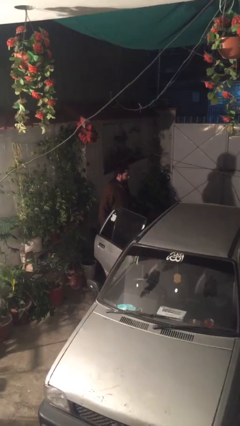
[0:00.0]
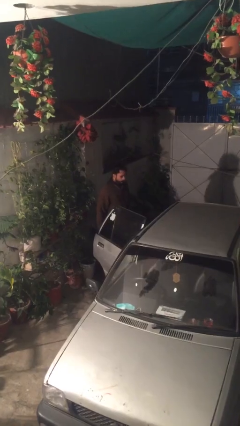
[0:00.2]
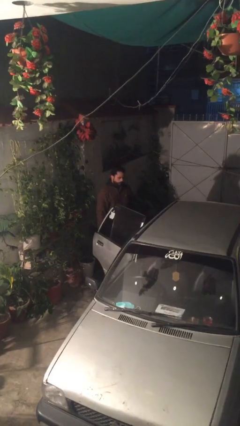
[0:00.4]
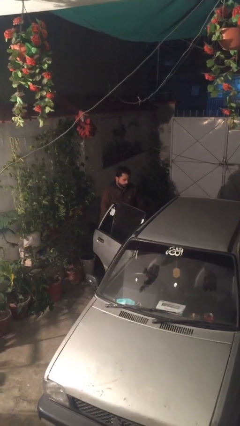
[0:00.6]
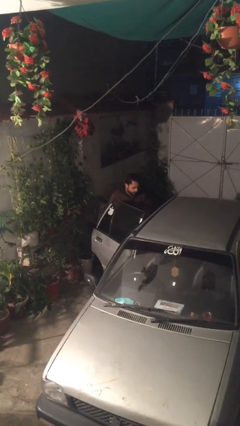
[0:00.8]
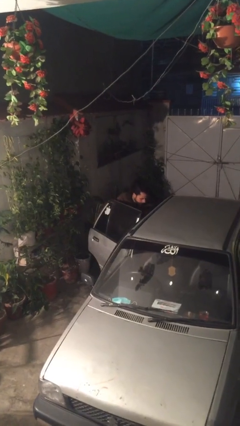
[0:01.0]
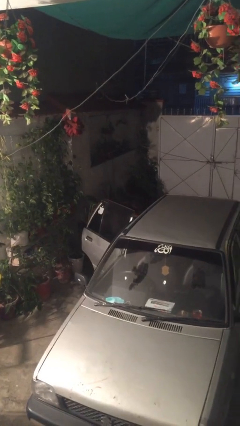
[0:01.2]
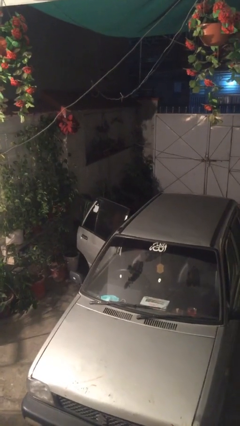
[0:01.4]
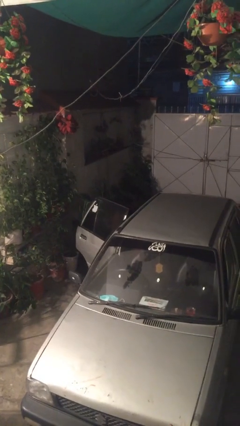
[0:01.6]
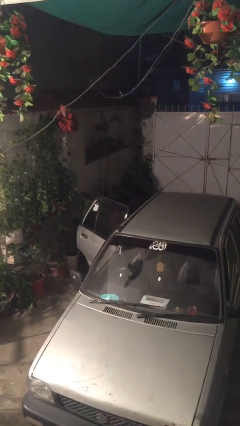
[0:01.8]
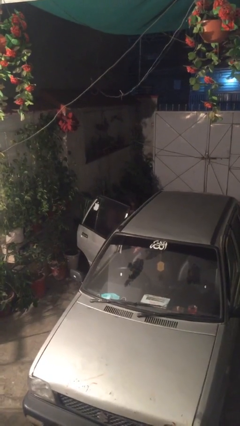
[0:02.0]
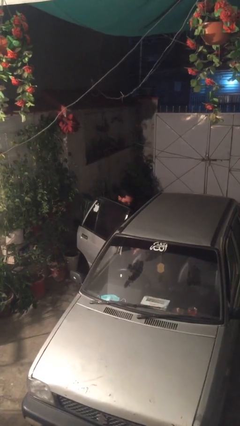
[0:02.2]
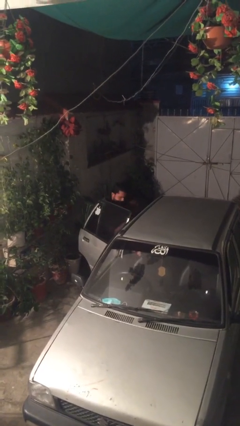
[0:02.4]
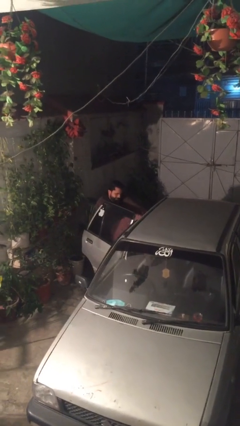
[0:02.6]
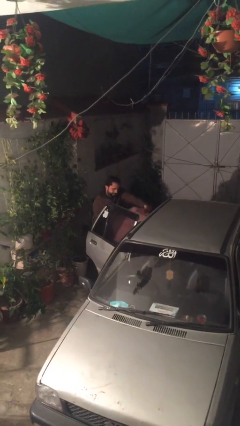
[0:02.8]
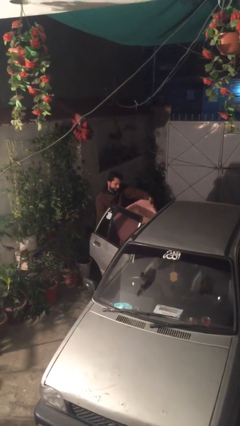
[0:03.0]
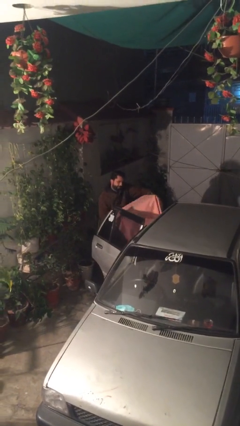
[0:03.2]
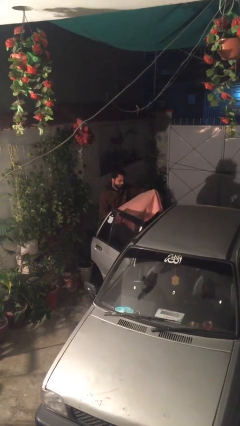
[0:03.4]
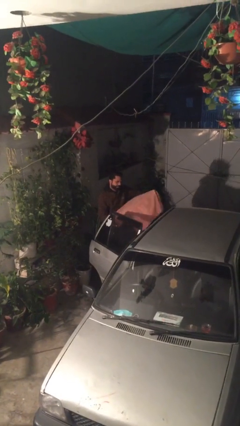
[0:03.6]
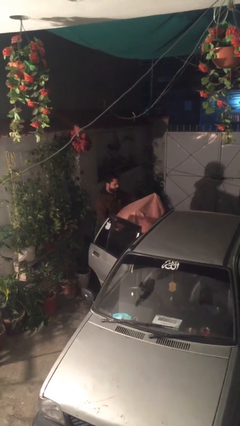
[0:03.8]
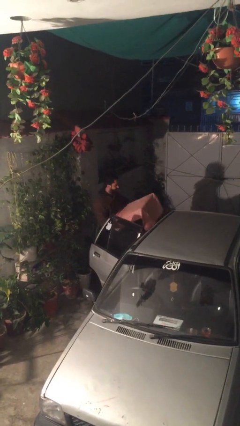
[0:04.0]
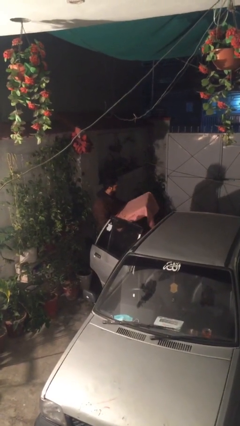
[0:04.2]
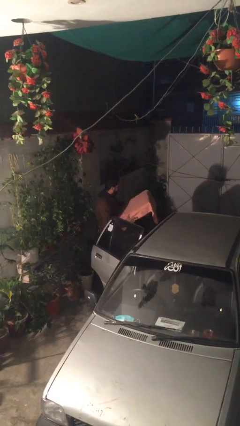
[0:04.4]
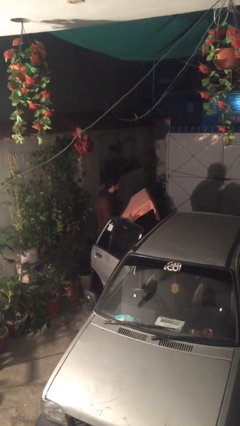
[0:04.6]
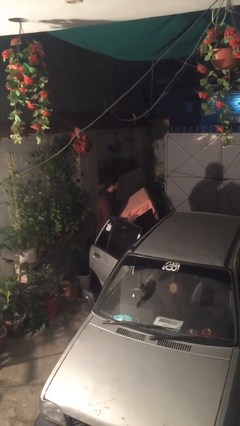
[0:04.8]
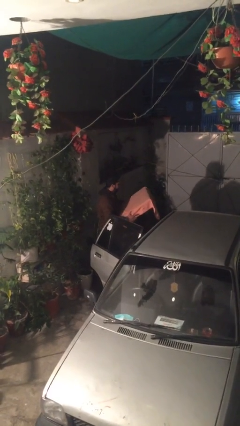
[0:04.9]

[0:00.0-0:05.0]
person unloads car

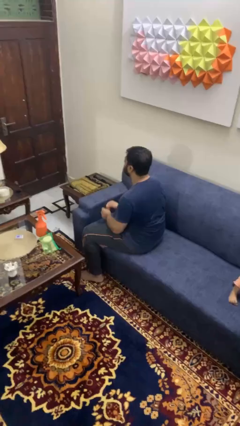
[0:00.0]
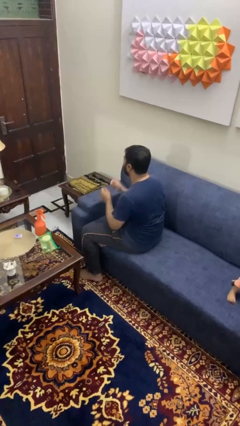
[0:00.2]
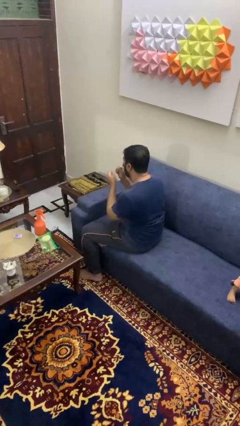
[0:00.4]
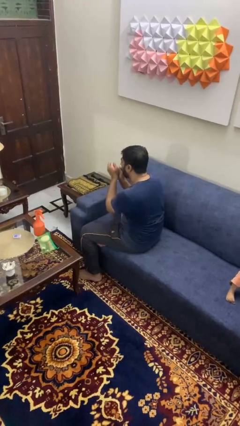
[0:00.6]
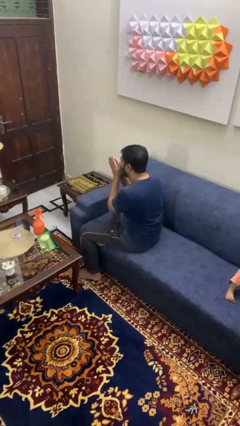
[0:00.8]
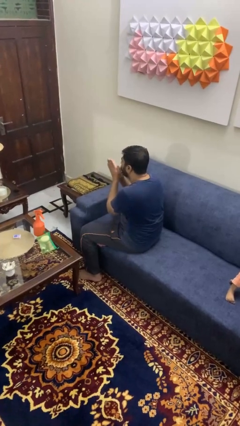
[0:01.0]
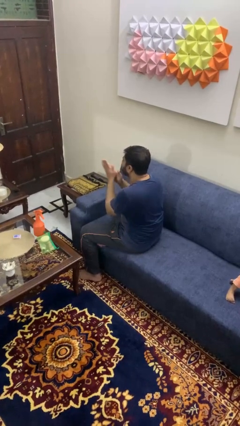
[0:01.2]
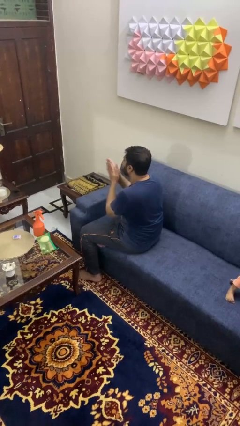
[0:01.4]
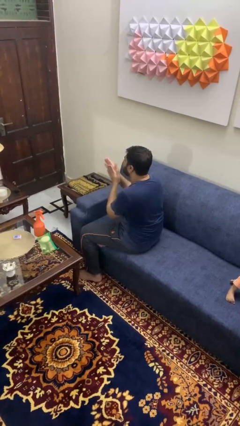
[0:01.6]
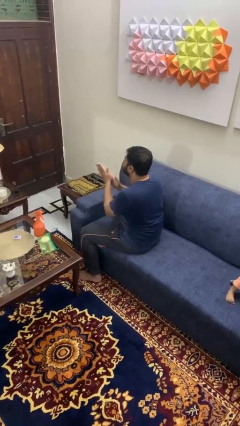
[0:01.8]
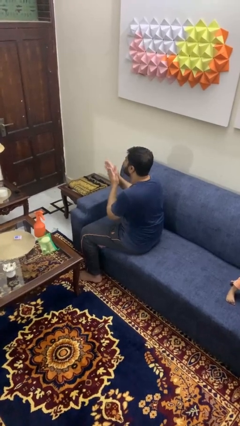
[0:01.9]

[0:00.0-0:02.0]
person blows into hands

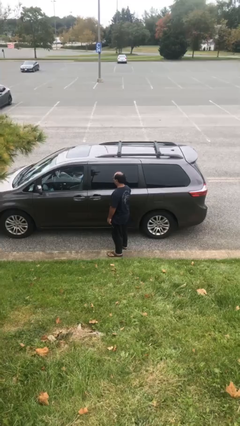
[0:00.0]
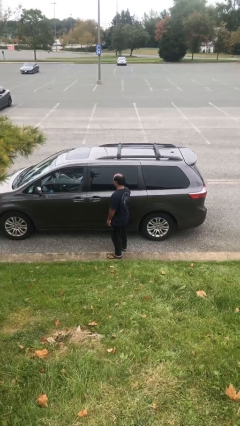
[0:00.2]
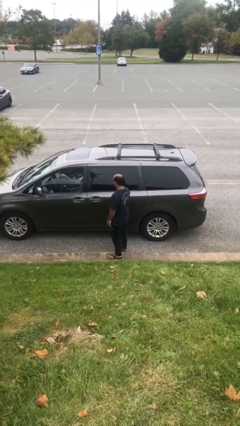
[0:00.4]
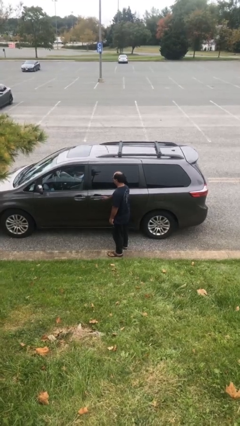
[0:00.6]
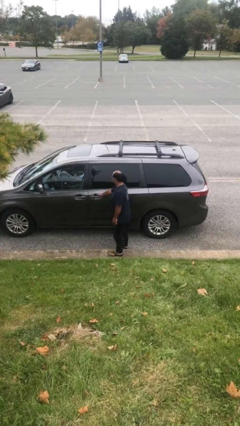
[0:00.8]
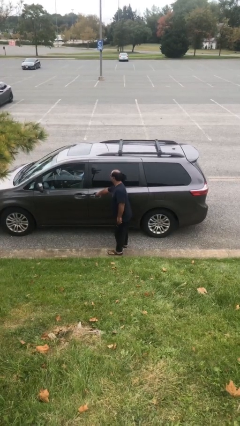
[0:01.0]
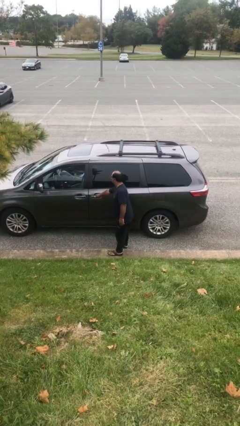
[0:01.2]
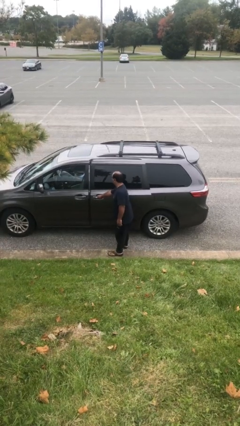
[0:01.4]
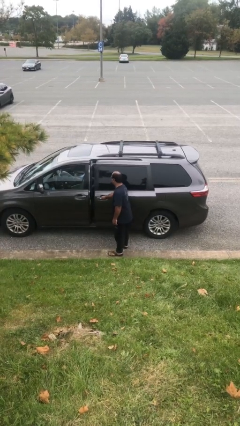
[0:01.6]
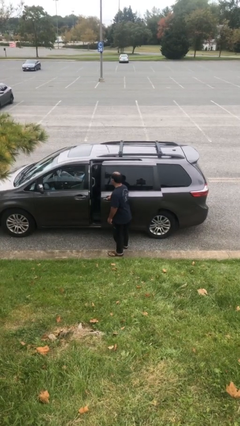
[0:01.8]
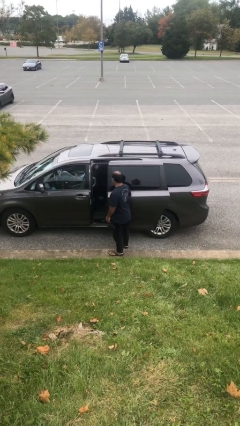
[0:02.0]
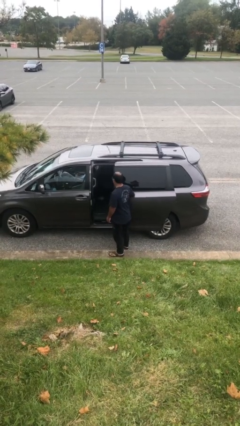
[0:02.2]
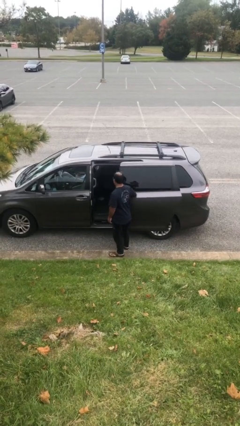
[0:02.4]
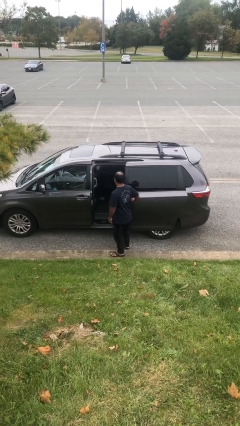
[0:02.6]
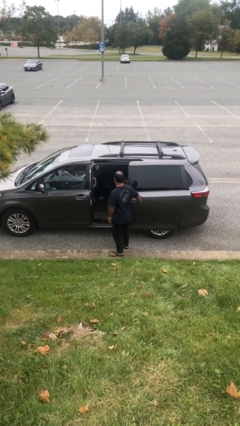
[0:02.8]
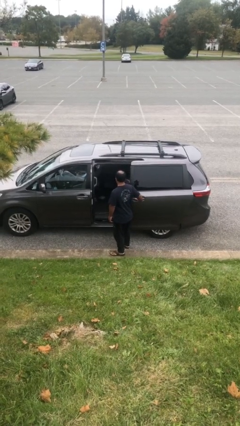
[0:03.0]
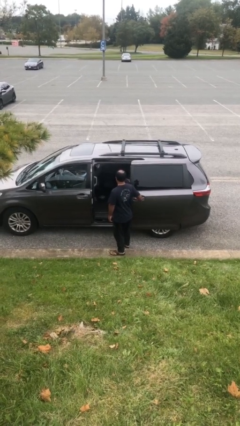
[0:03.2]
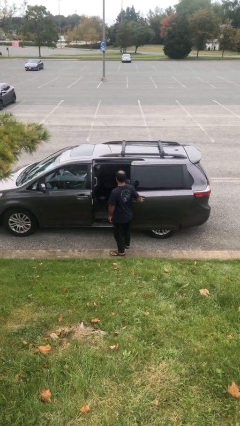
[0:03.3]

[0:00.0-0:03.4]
person opens car door

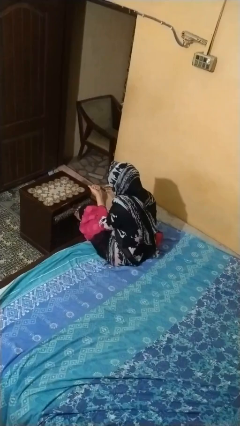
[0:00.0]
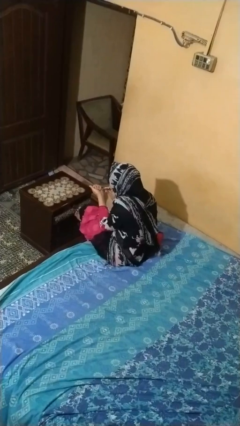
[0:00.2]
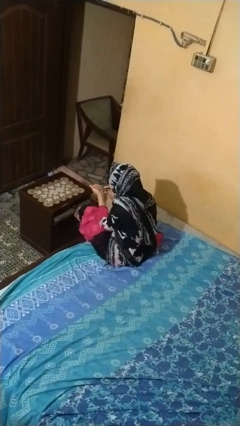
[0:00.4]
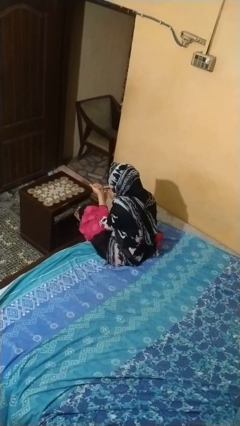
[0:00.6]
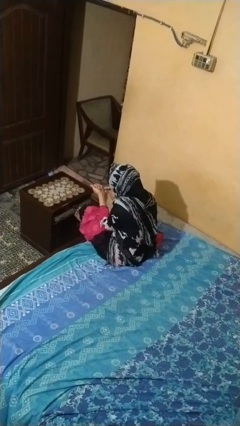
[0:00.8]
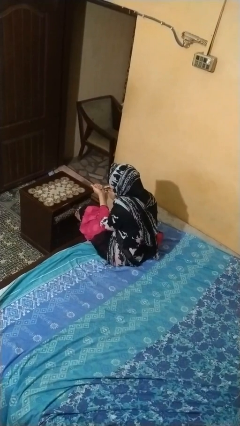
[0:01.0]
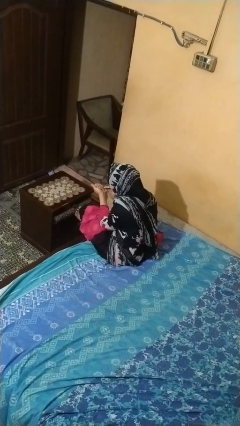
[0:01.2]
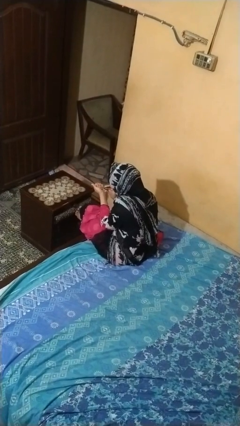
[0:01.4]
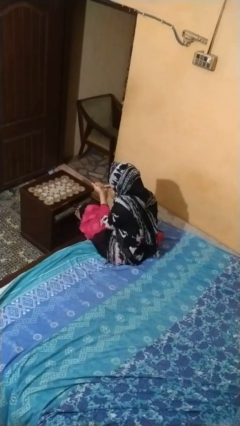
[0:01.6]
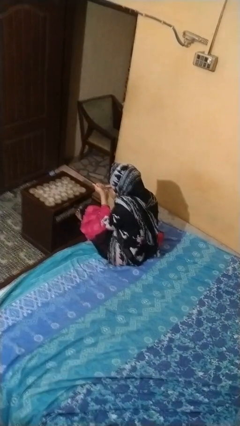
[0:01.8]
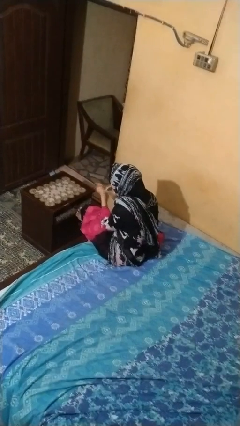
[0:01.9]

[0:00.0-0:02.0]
person clips fingernails

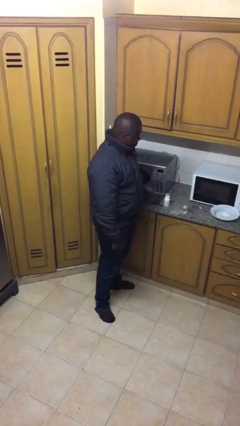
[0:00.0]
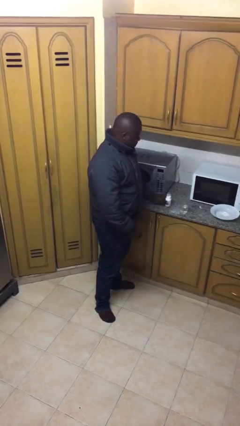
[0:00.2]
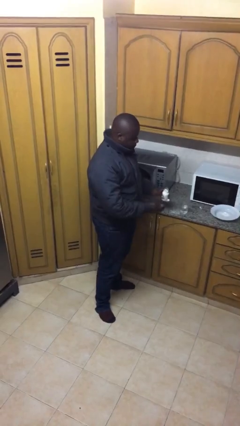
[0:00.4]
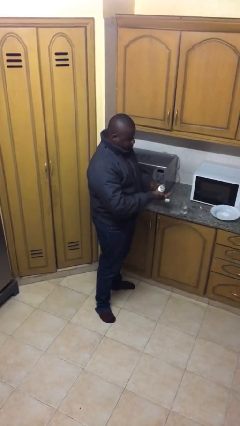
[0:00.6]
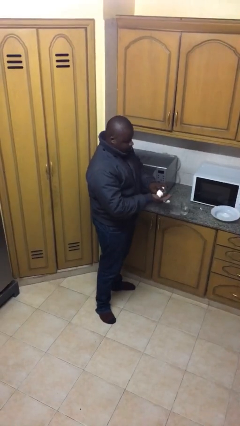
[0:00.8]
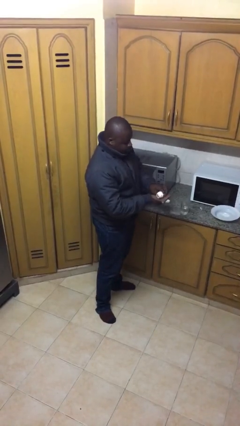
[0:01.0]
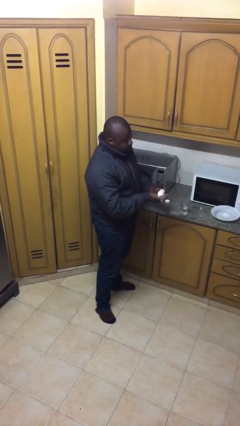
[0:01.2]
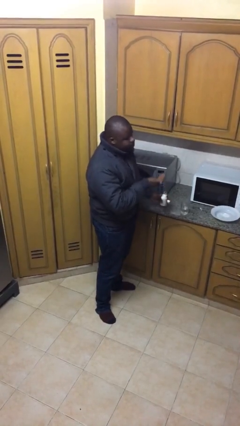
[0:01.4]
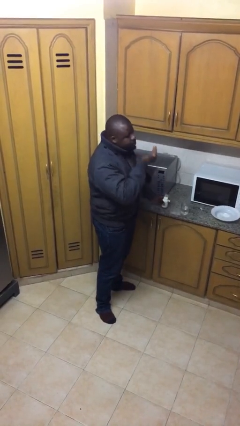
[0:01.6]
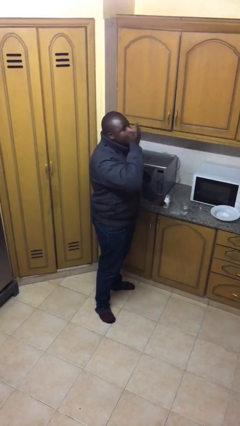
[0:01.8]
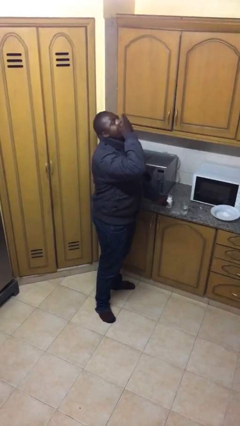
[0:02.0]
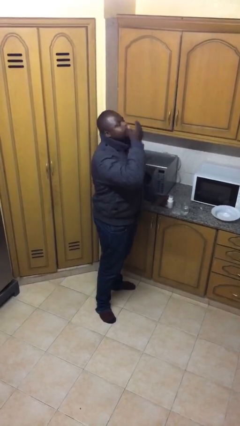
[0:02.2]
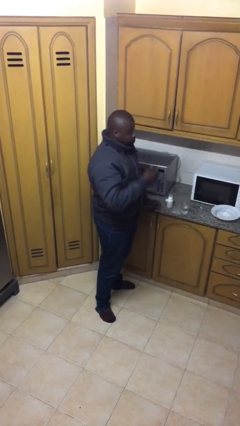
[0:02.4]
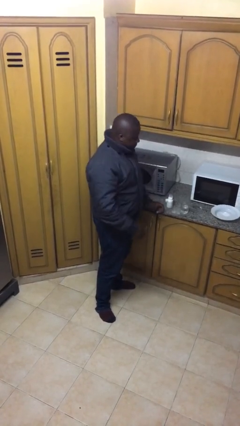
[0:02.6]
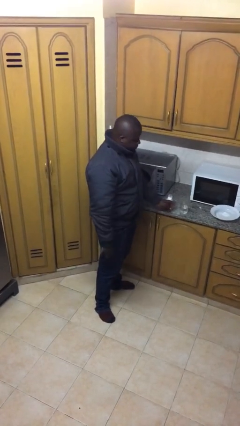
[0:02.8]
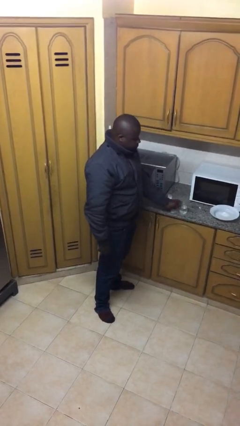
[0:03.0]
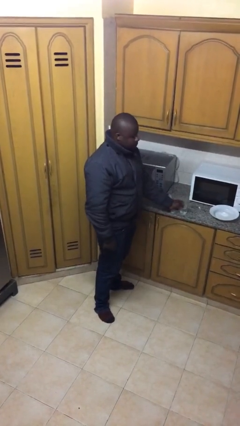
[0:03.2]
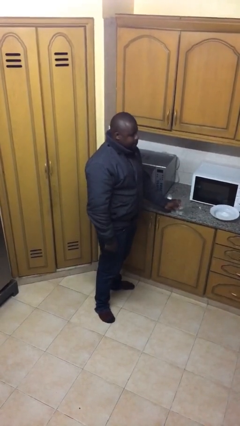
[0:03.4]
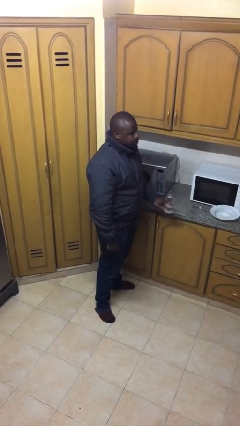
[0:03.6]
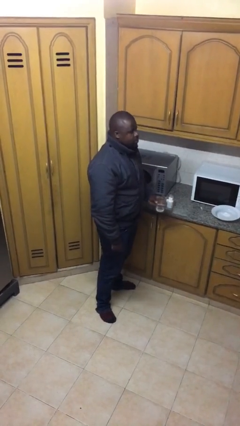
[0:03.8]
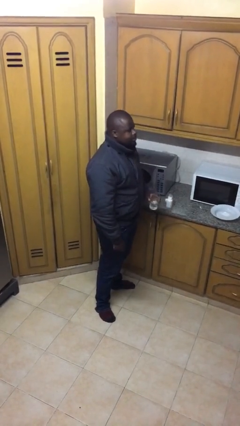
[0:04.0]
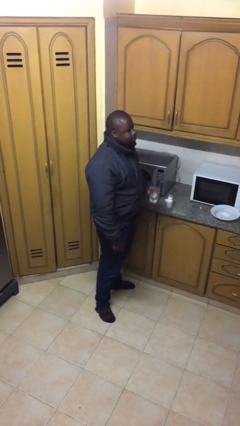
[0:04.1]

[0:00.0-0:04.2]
person takes medicine pills

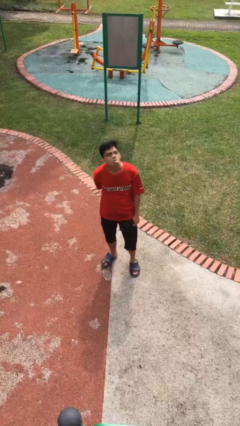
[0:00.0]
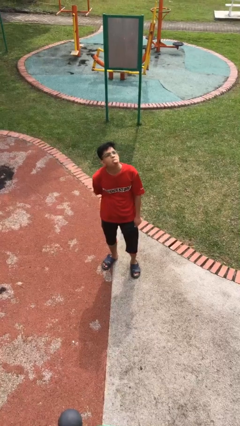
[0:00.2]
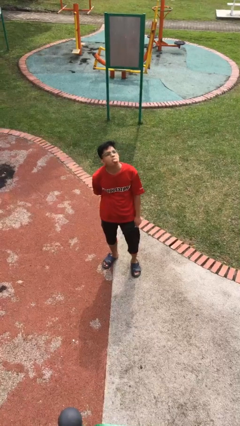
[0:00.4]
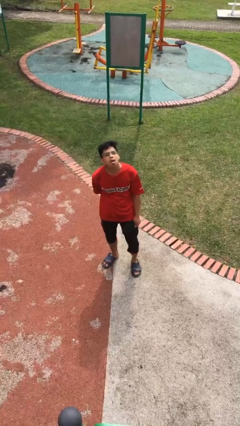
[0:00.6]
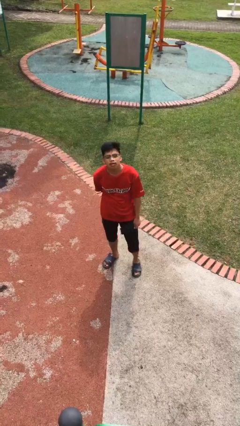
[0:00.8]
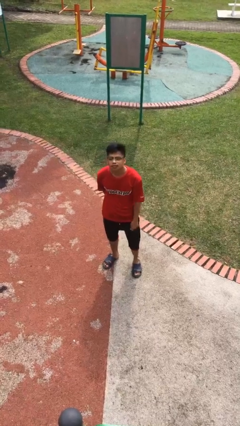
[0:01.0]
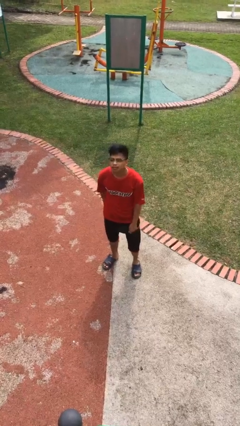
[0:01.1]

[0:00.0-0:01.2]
person sticks out tongue
